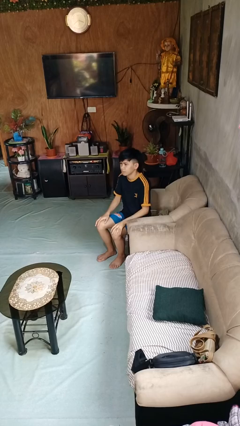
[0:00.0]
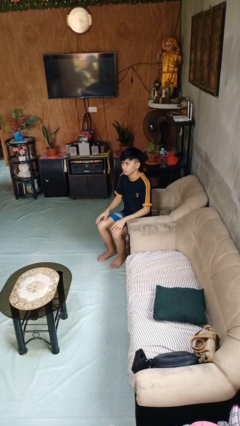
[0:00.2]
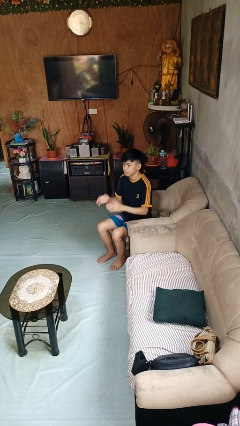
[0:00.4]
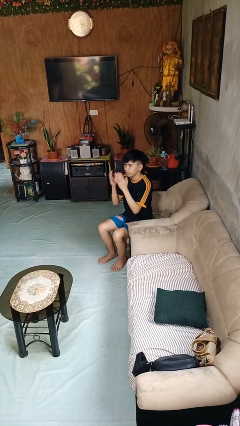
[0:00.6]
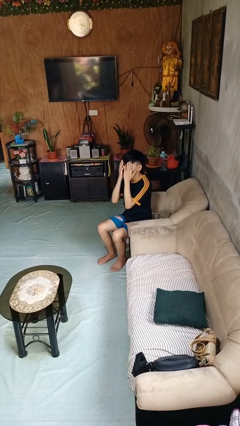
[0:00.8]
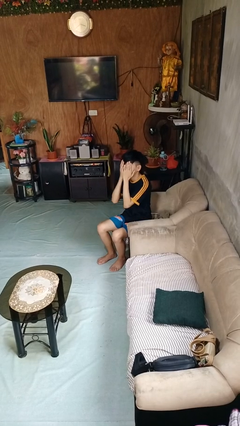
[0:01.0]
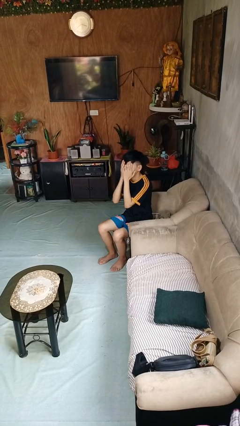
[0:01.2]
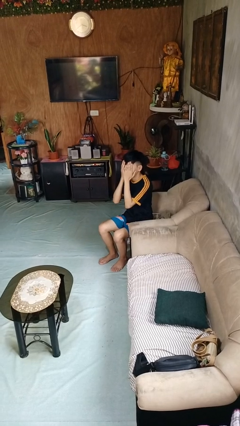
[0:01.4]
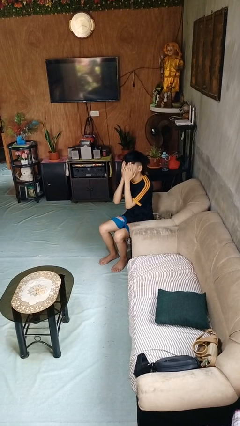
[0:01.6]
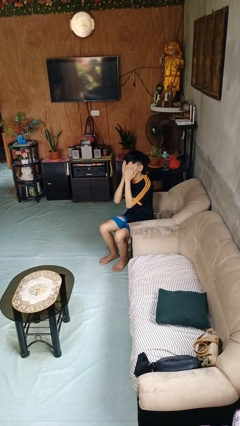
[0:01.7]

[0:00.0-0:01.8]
person covers face with hands

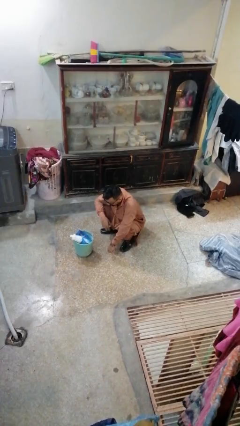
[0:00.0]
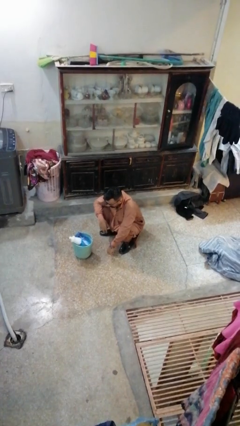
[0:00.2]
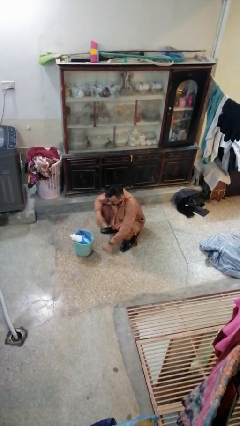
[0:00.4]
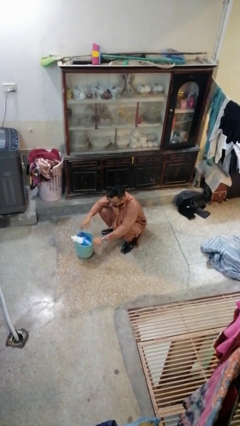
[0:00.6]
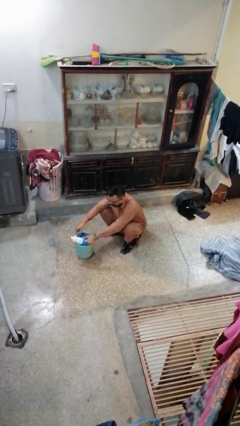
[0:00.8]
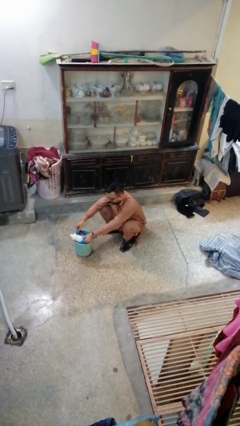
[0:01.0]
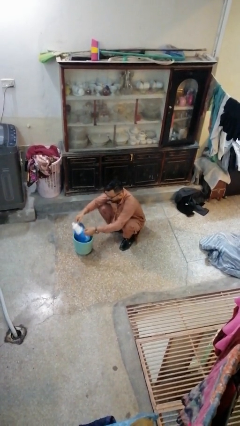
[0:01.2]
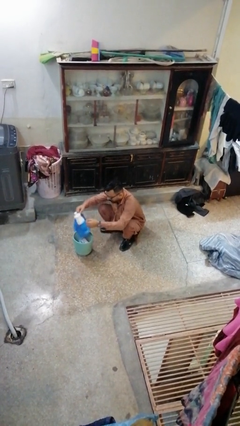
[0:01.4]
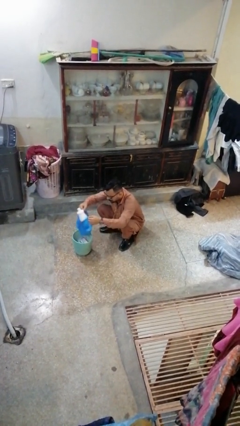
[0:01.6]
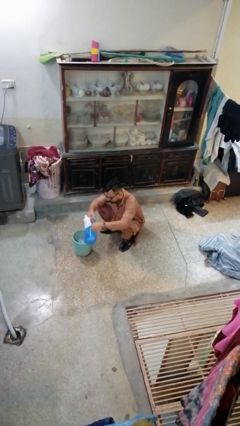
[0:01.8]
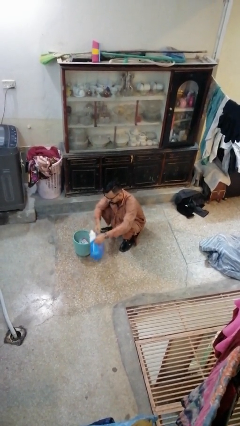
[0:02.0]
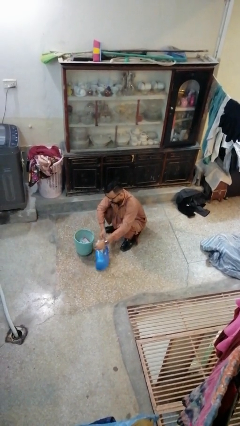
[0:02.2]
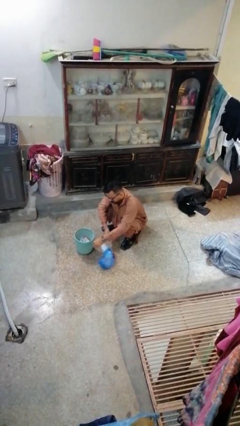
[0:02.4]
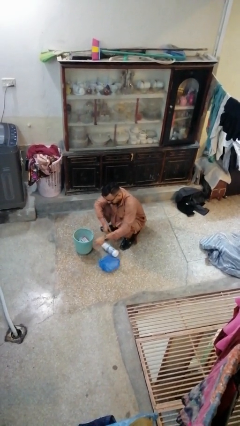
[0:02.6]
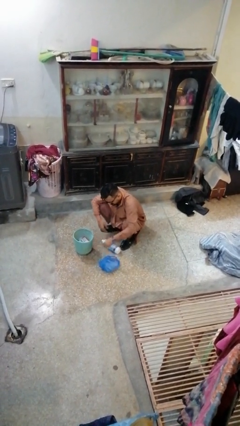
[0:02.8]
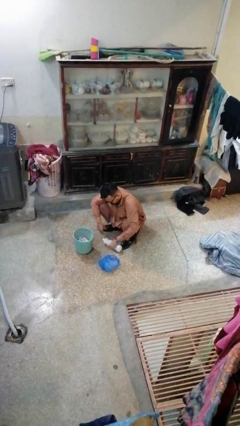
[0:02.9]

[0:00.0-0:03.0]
person removes trashbag from trashcan

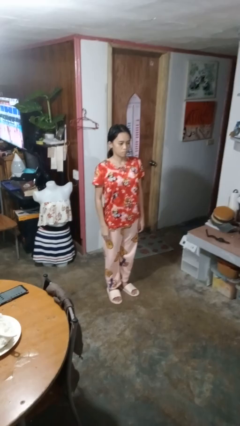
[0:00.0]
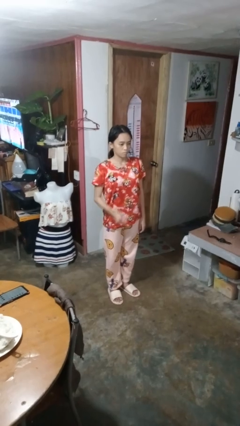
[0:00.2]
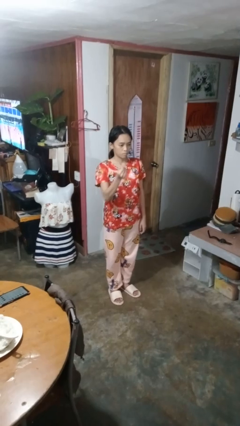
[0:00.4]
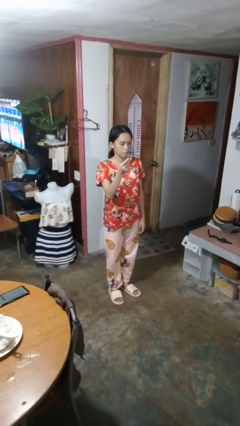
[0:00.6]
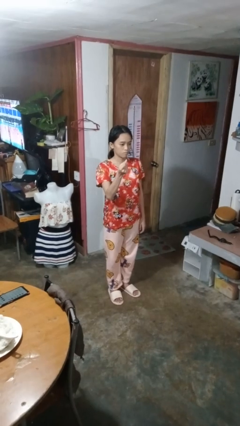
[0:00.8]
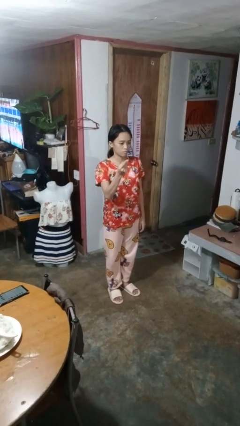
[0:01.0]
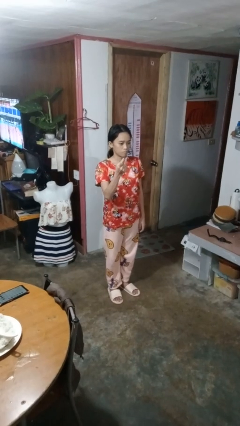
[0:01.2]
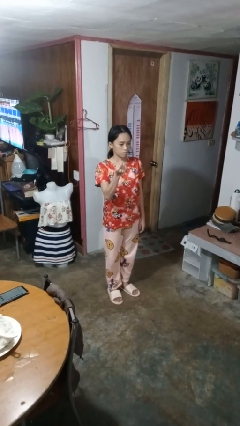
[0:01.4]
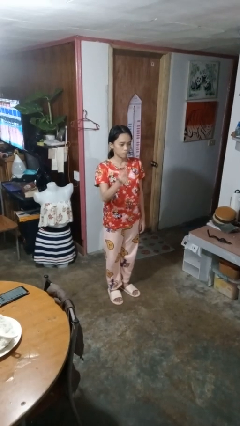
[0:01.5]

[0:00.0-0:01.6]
person snaps fingers

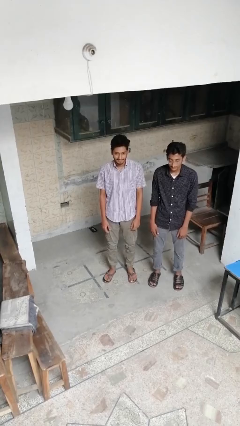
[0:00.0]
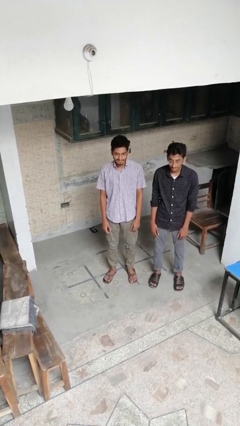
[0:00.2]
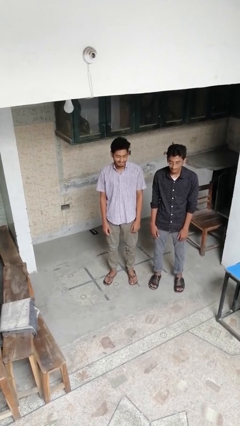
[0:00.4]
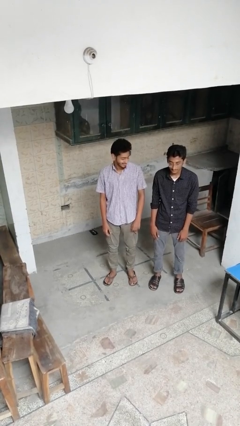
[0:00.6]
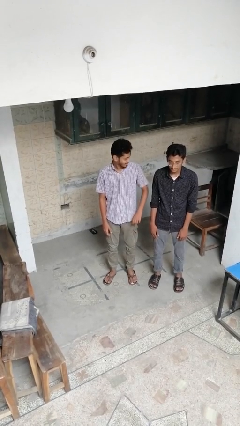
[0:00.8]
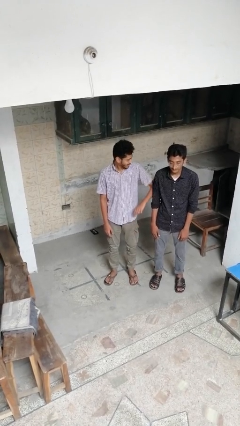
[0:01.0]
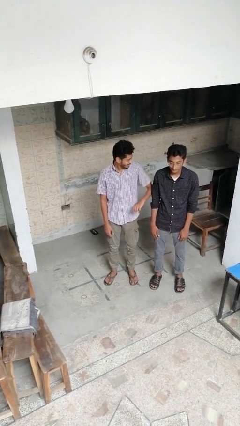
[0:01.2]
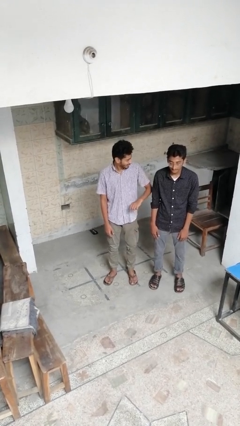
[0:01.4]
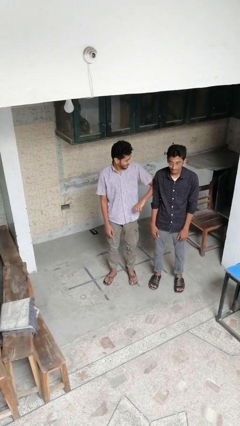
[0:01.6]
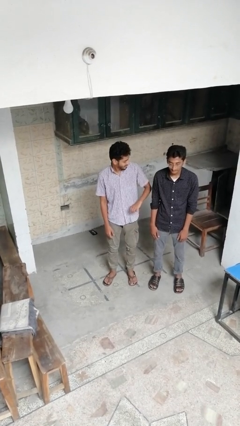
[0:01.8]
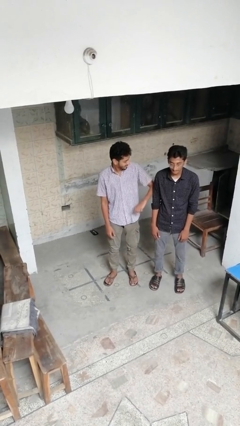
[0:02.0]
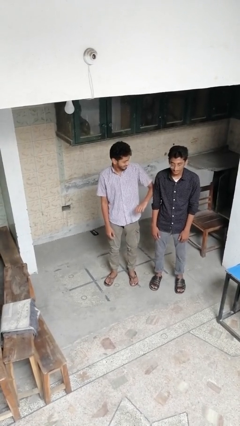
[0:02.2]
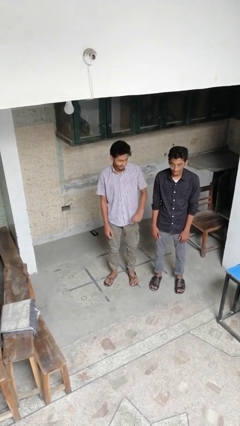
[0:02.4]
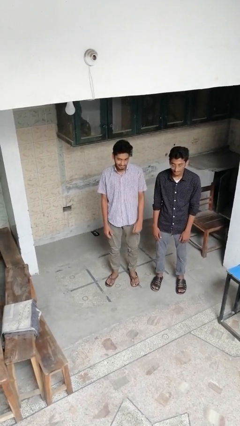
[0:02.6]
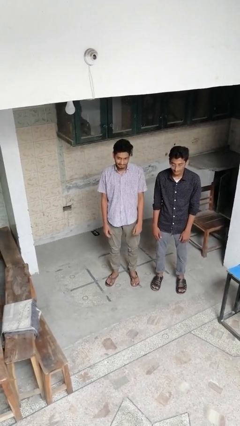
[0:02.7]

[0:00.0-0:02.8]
person nudges person with elbow

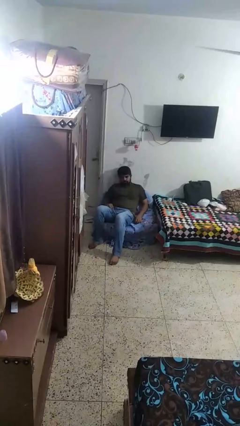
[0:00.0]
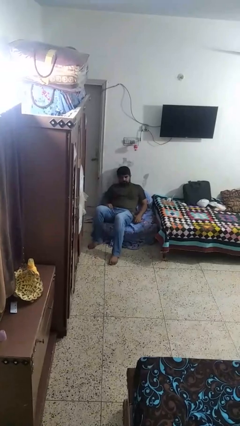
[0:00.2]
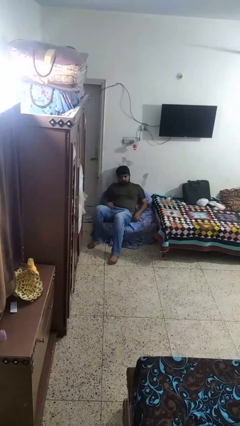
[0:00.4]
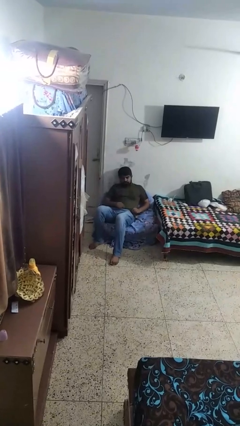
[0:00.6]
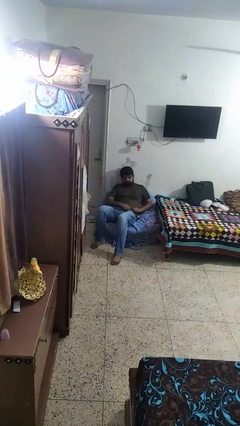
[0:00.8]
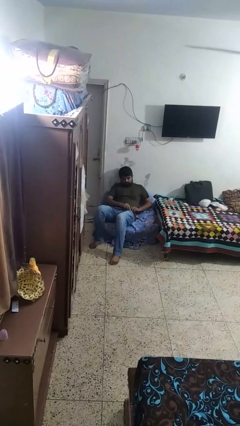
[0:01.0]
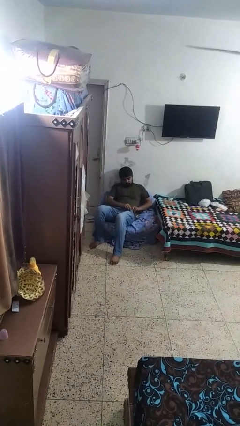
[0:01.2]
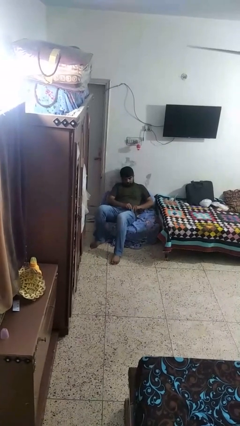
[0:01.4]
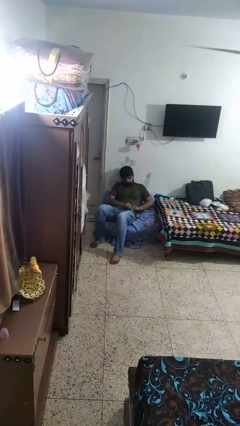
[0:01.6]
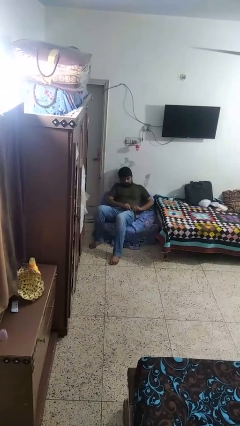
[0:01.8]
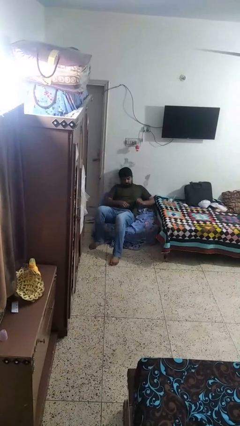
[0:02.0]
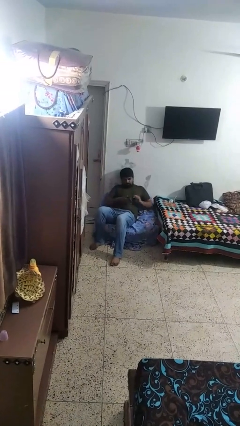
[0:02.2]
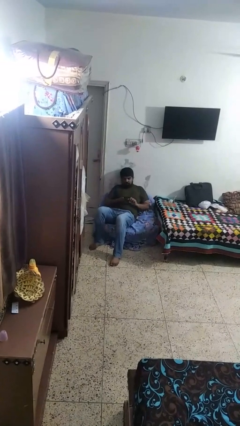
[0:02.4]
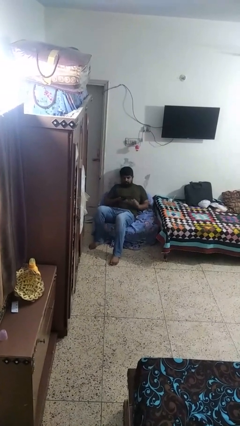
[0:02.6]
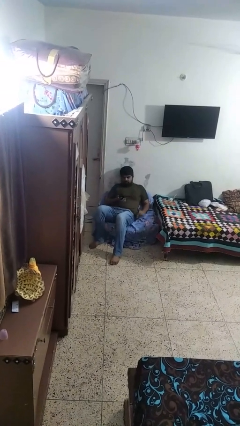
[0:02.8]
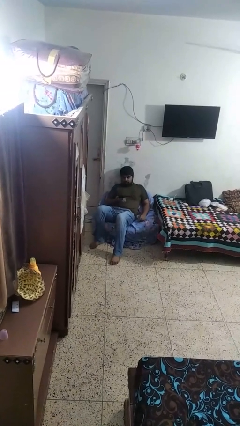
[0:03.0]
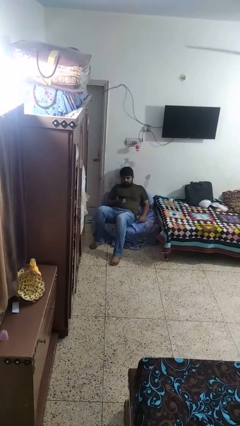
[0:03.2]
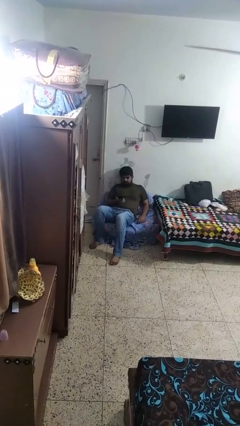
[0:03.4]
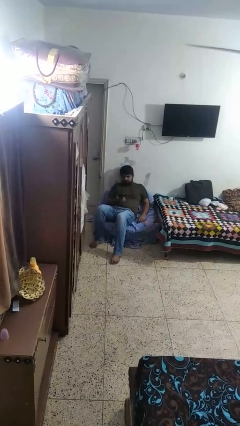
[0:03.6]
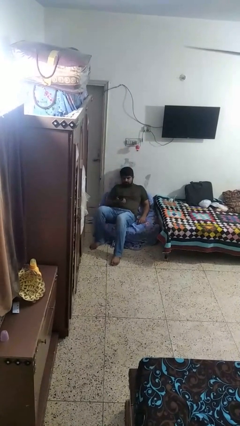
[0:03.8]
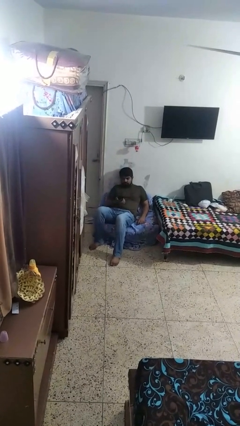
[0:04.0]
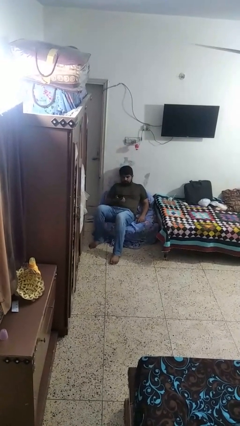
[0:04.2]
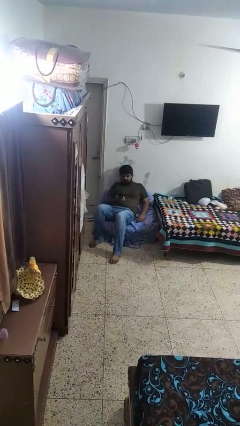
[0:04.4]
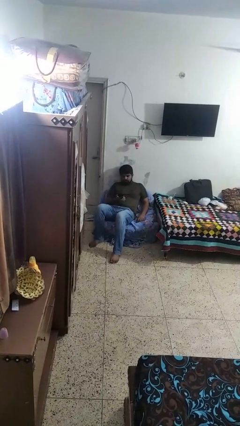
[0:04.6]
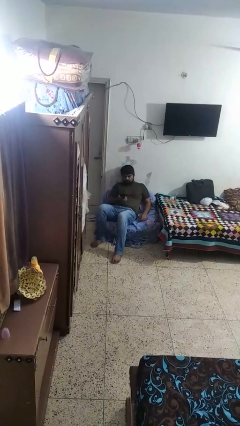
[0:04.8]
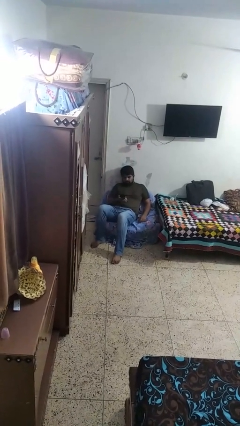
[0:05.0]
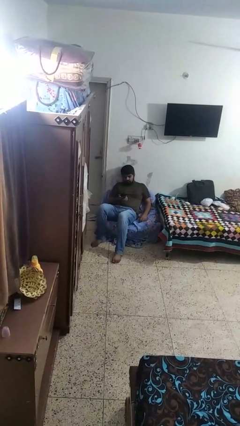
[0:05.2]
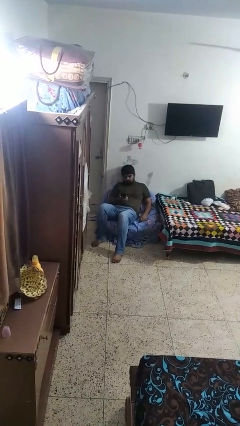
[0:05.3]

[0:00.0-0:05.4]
person takes phone from pocket

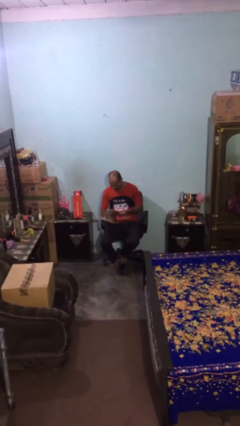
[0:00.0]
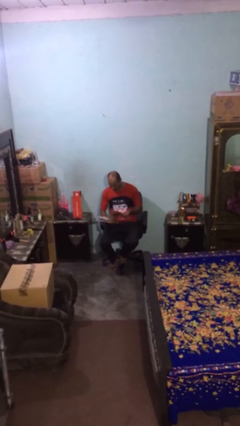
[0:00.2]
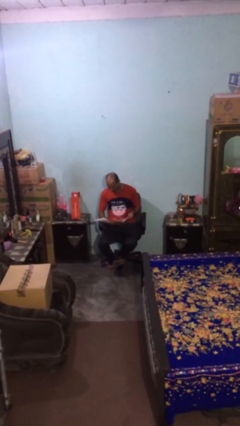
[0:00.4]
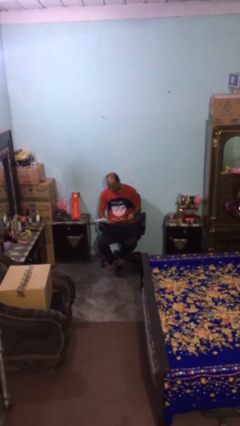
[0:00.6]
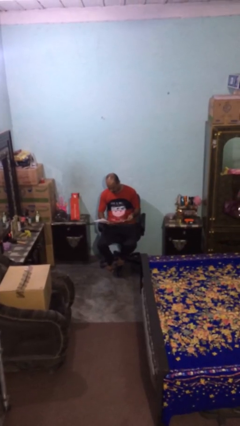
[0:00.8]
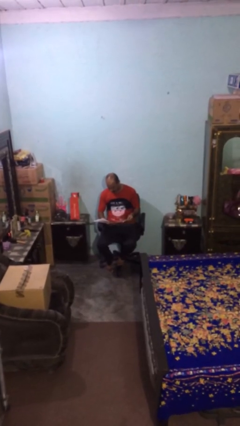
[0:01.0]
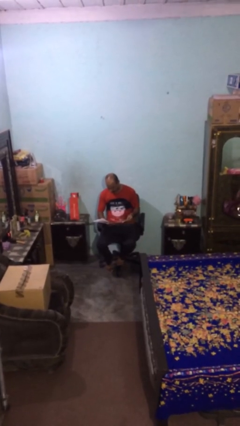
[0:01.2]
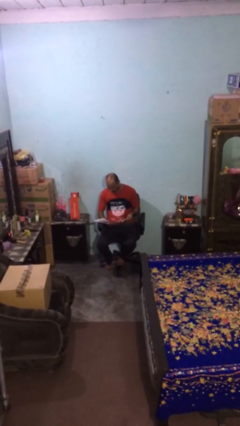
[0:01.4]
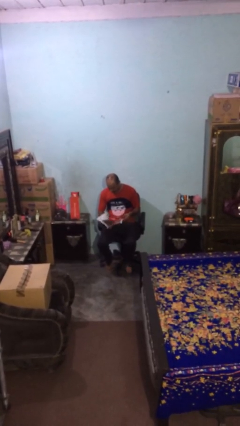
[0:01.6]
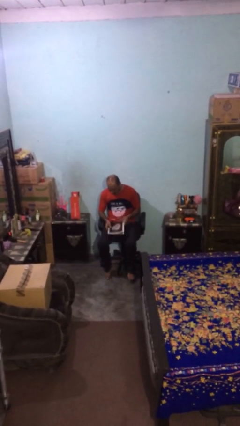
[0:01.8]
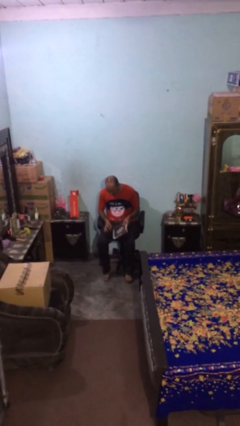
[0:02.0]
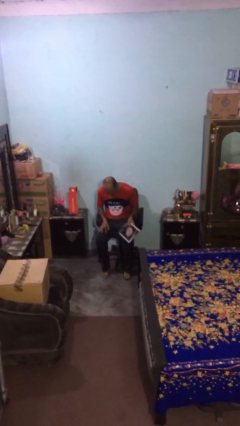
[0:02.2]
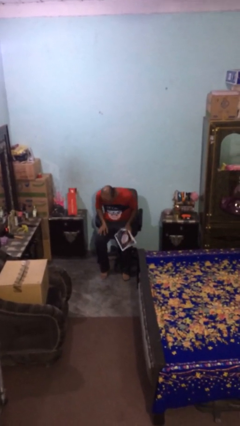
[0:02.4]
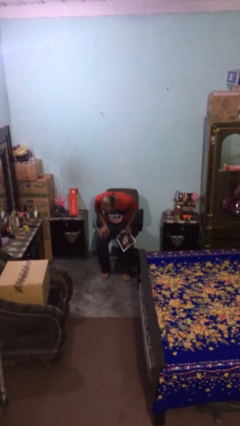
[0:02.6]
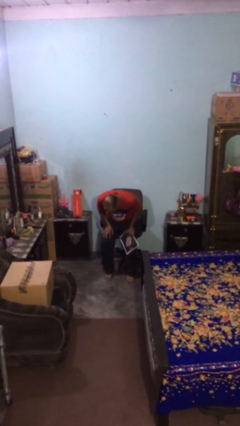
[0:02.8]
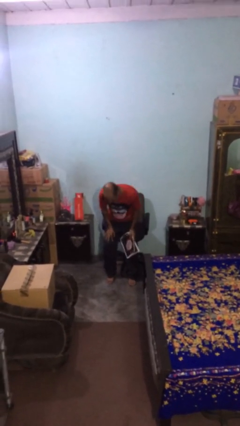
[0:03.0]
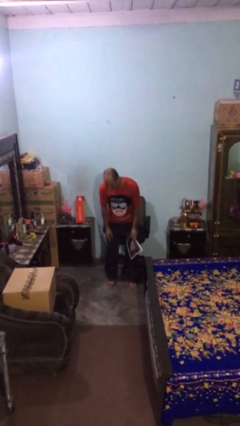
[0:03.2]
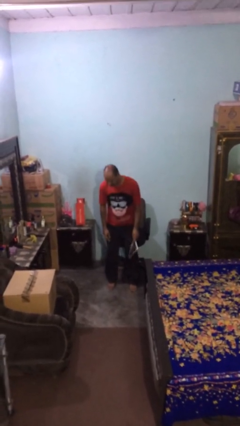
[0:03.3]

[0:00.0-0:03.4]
person stands up
